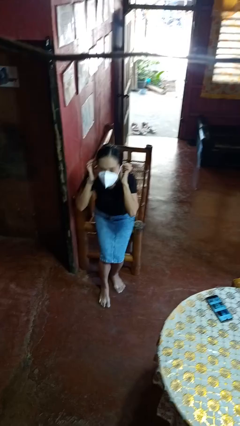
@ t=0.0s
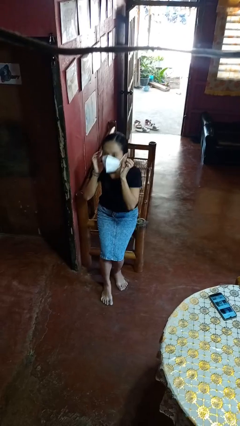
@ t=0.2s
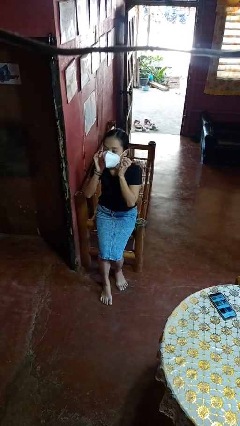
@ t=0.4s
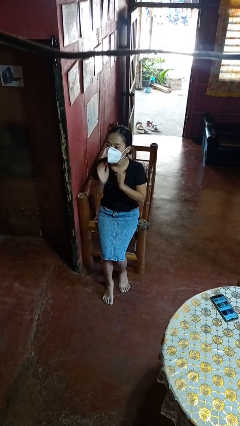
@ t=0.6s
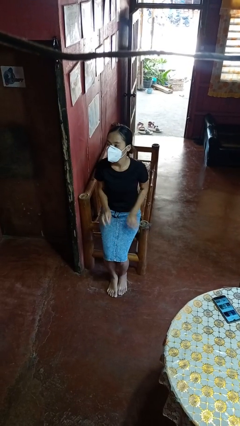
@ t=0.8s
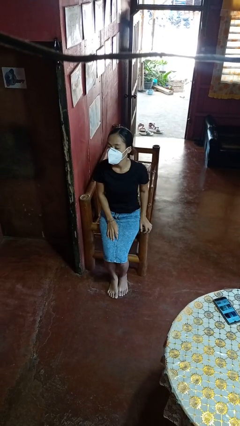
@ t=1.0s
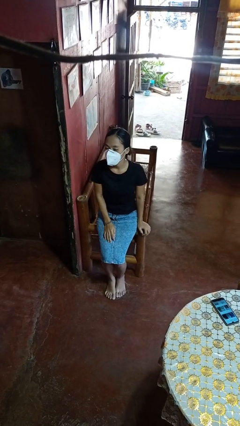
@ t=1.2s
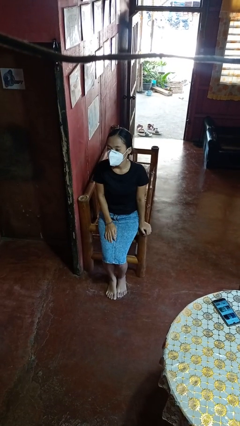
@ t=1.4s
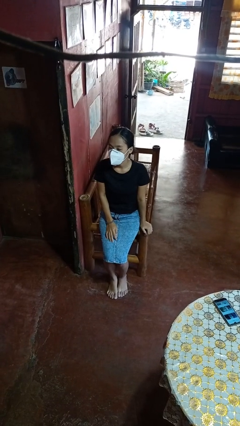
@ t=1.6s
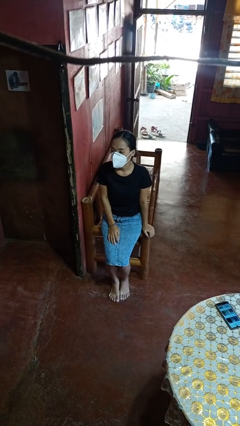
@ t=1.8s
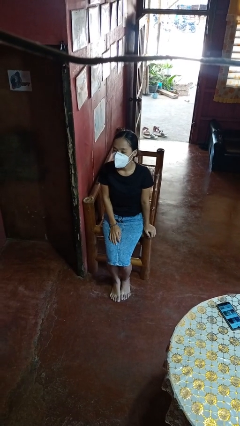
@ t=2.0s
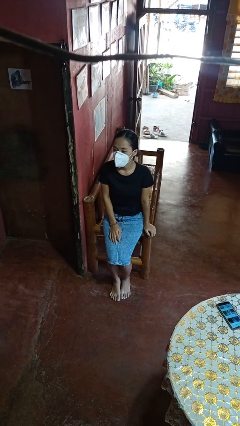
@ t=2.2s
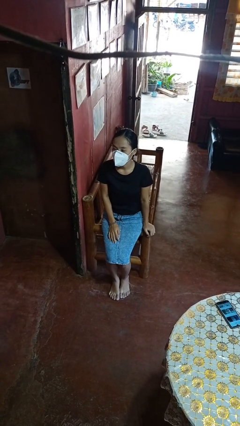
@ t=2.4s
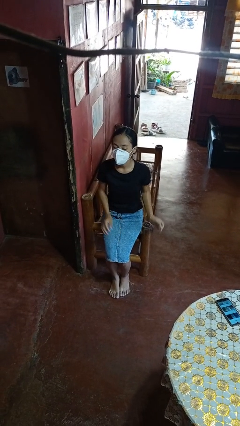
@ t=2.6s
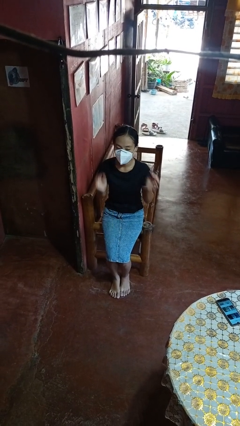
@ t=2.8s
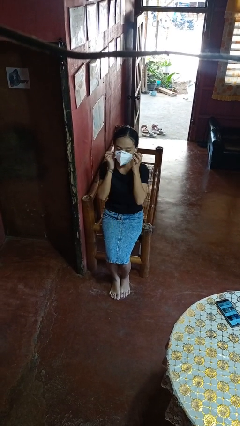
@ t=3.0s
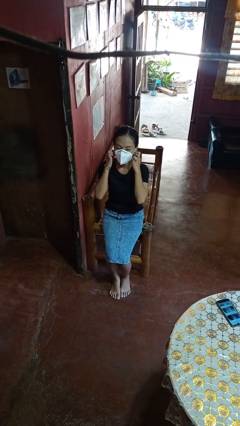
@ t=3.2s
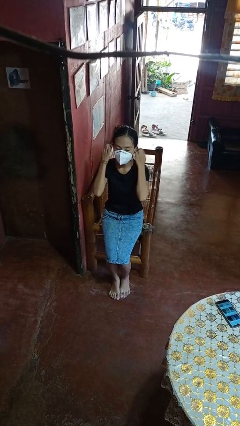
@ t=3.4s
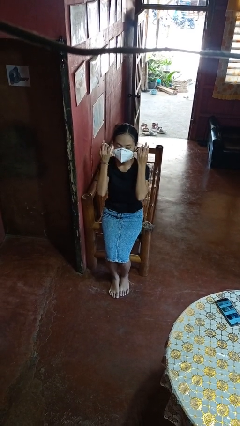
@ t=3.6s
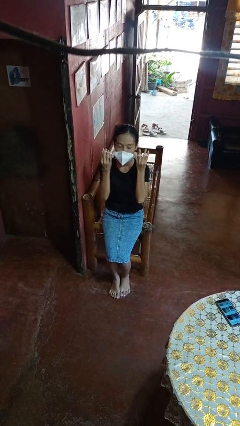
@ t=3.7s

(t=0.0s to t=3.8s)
person puts on facemask

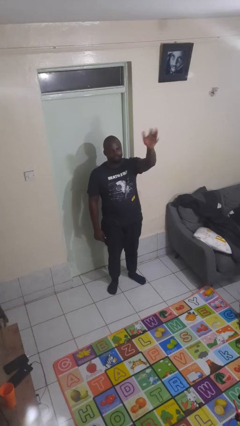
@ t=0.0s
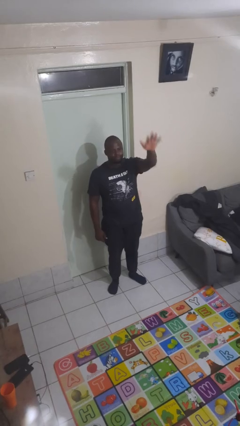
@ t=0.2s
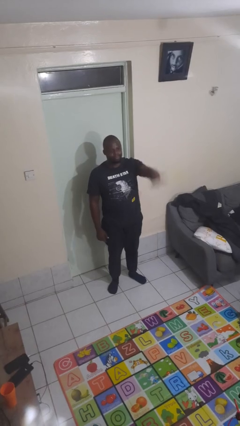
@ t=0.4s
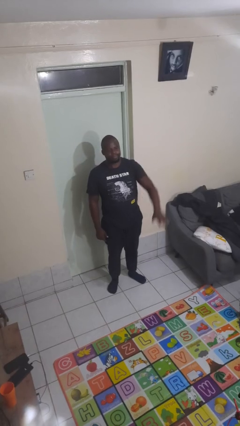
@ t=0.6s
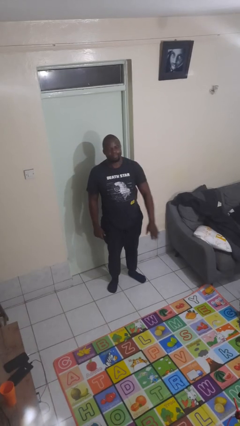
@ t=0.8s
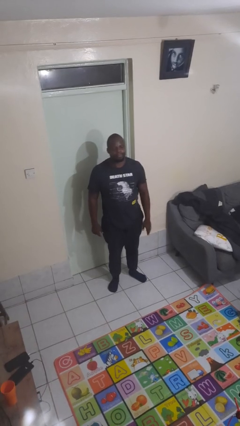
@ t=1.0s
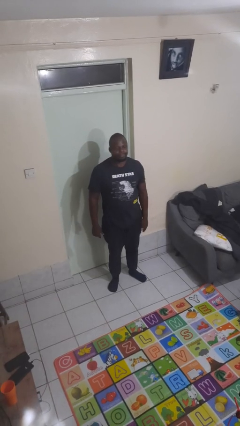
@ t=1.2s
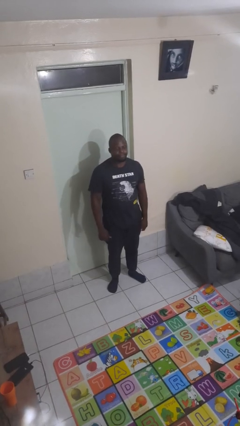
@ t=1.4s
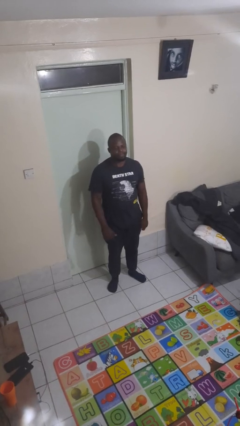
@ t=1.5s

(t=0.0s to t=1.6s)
person gestures swipe down

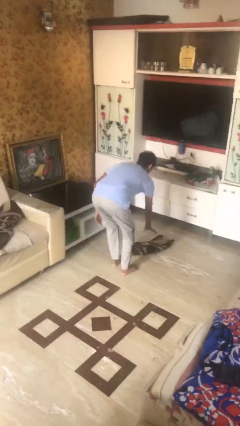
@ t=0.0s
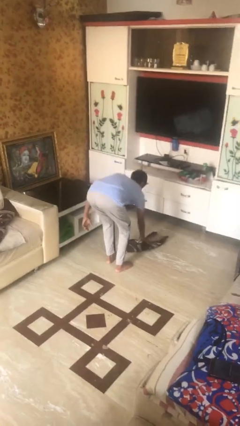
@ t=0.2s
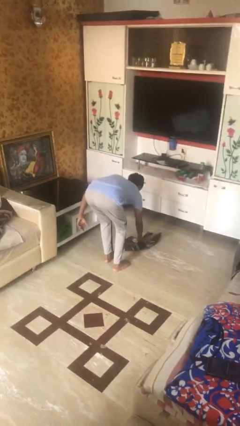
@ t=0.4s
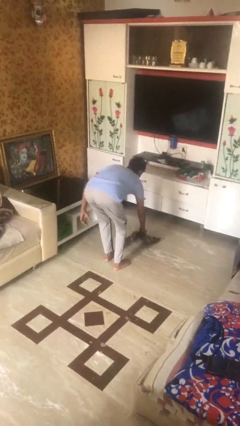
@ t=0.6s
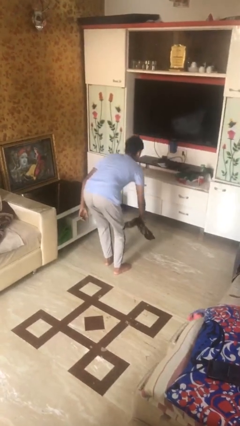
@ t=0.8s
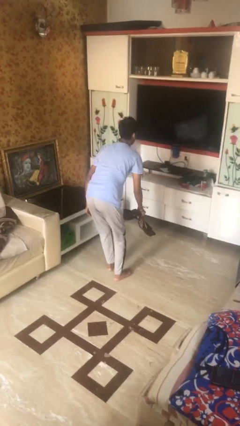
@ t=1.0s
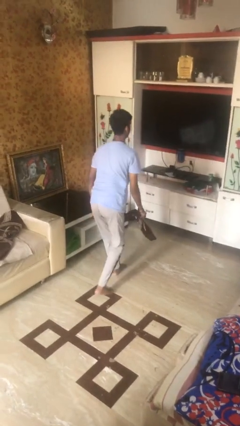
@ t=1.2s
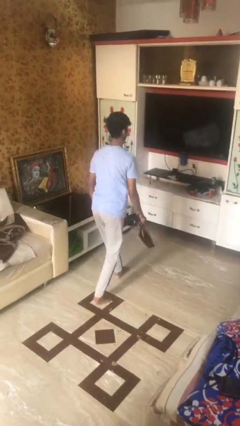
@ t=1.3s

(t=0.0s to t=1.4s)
person picks up object from floor

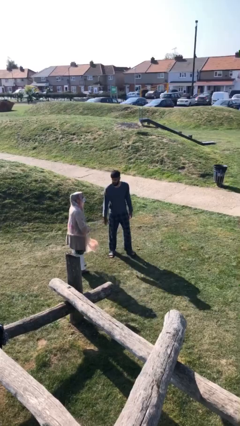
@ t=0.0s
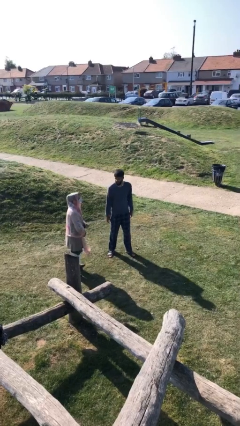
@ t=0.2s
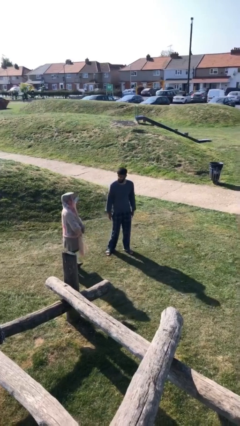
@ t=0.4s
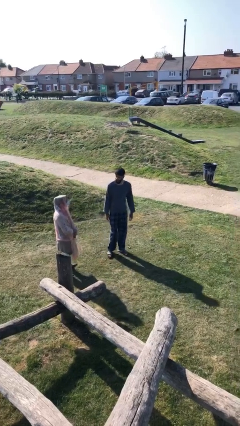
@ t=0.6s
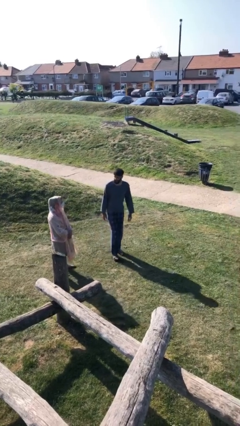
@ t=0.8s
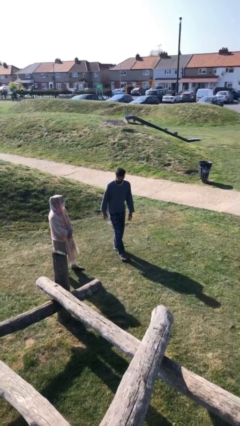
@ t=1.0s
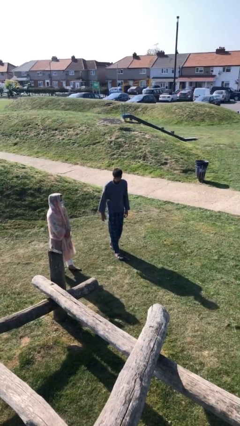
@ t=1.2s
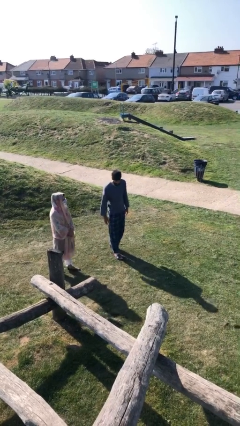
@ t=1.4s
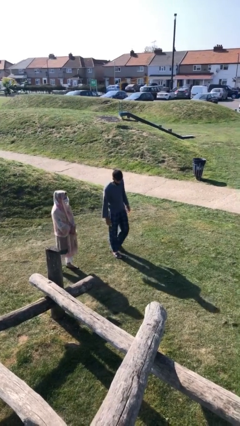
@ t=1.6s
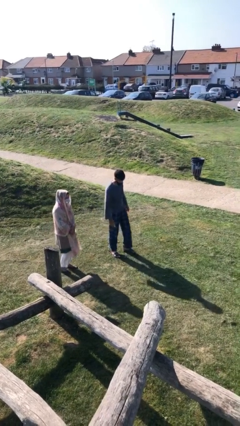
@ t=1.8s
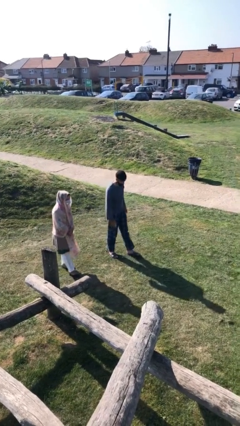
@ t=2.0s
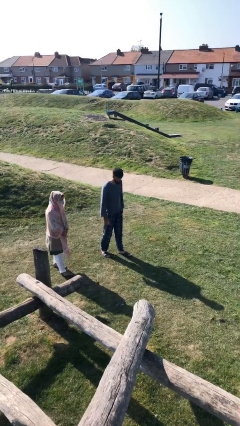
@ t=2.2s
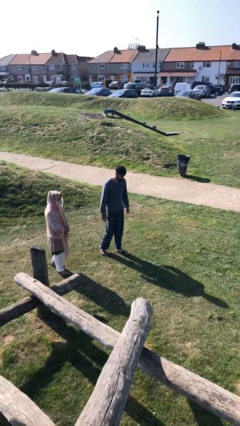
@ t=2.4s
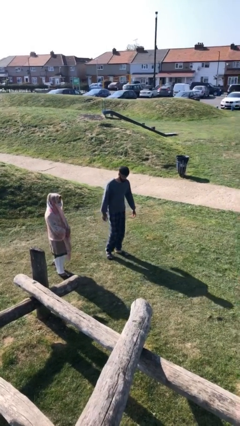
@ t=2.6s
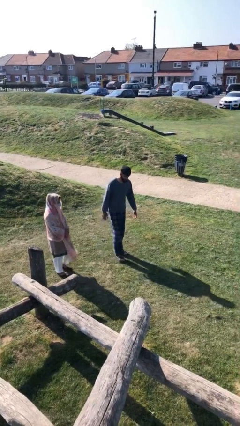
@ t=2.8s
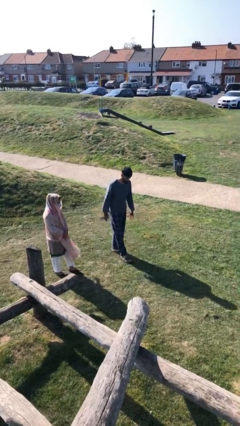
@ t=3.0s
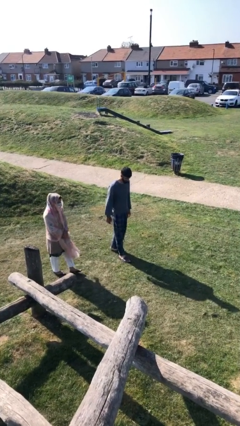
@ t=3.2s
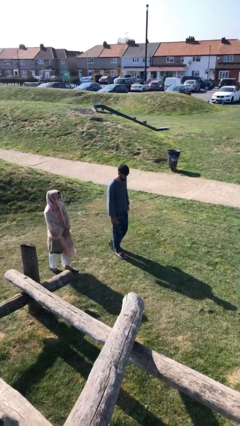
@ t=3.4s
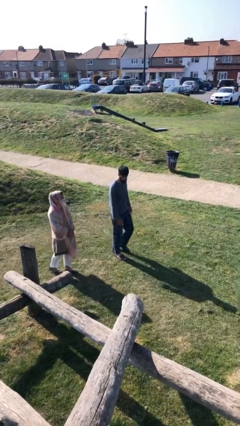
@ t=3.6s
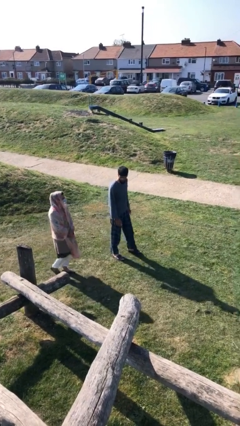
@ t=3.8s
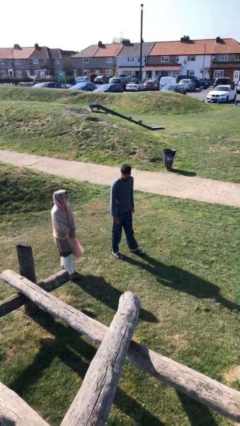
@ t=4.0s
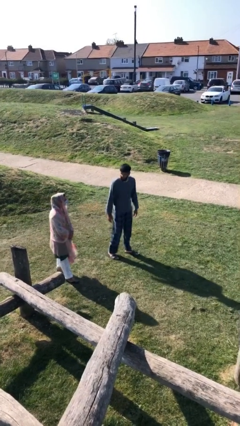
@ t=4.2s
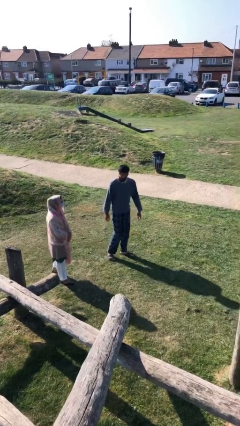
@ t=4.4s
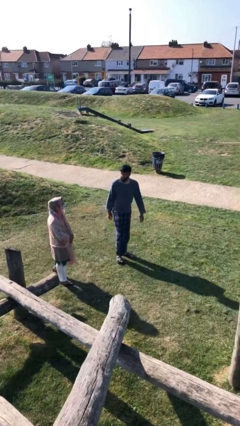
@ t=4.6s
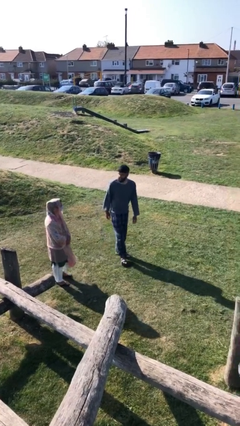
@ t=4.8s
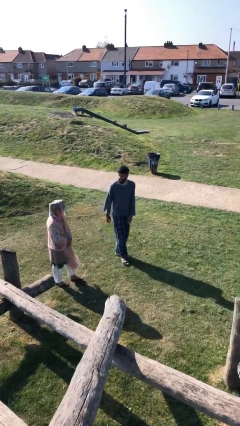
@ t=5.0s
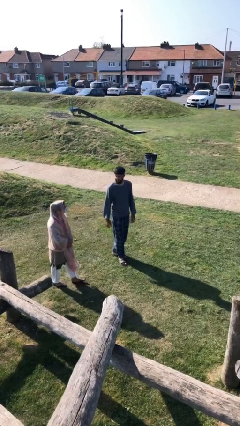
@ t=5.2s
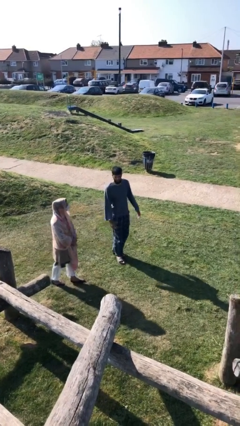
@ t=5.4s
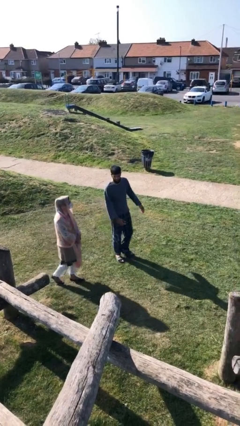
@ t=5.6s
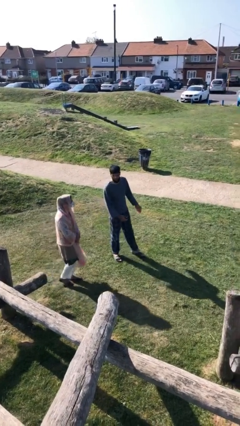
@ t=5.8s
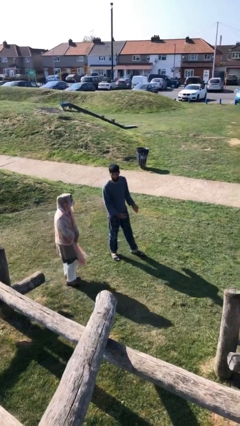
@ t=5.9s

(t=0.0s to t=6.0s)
person talks to person

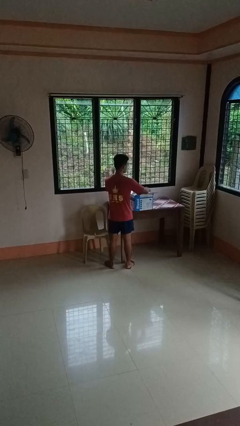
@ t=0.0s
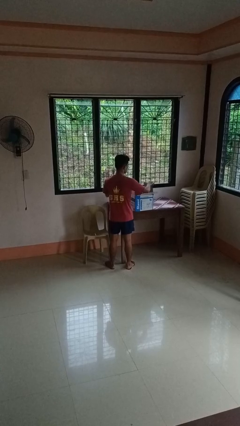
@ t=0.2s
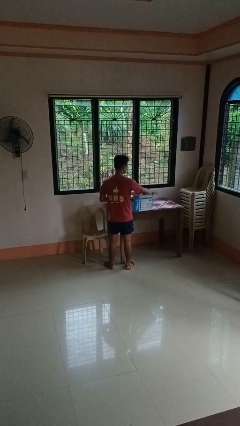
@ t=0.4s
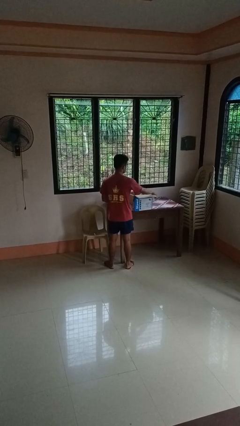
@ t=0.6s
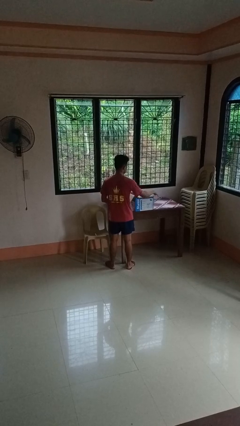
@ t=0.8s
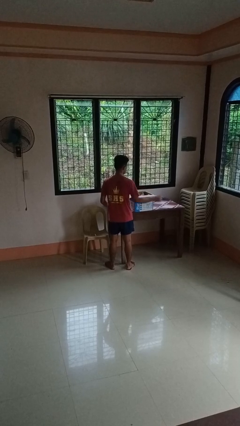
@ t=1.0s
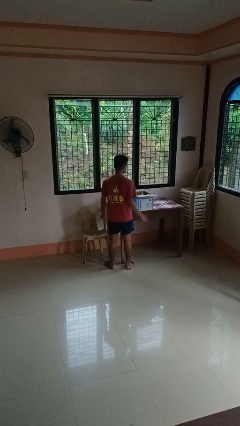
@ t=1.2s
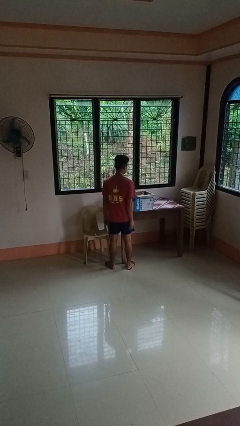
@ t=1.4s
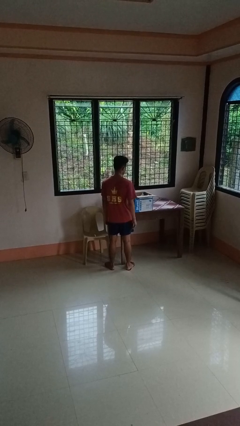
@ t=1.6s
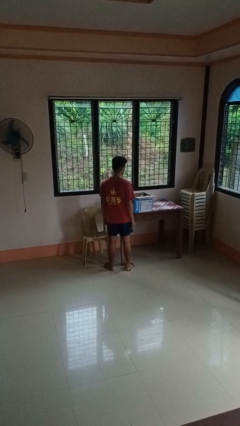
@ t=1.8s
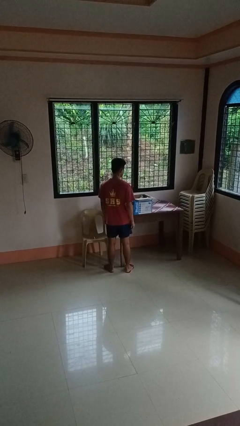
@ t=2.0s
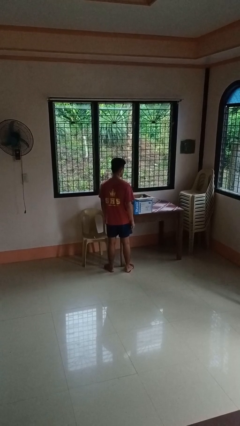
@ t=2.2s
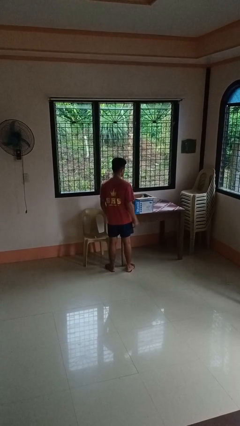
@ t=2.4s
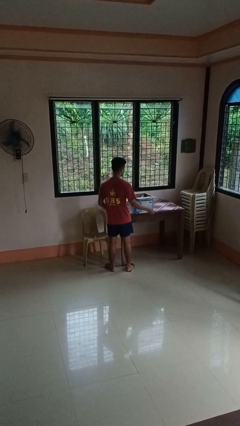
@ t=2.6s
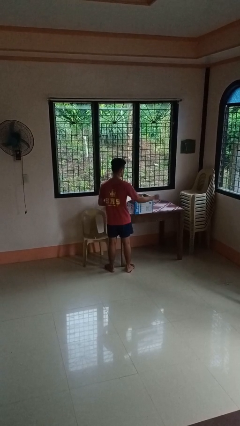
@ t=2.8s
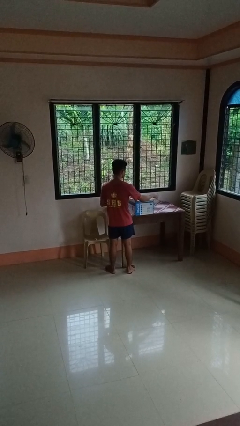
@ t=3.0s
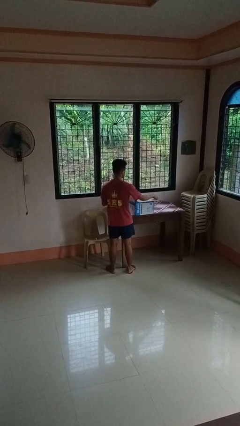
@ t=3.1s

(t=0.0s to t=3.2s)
person opens box

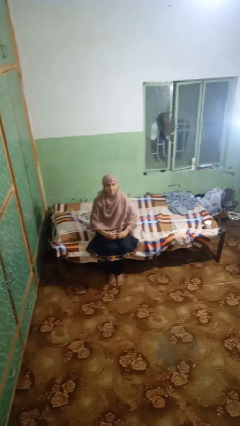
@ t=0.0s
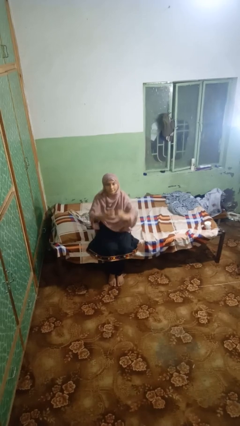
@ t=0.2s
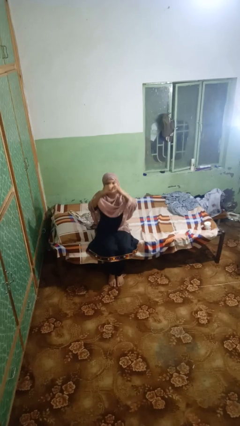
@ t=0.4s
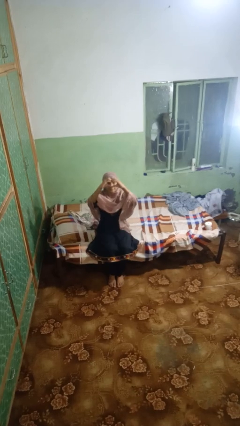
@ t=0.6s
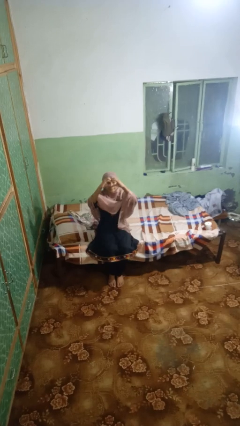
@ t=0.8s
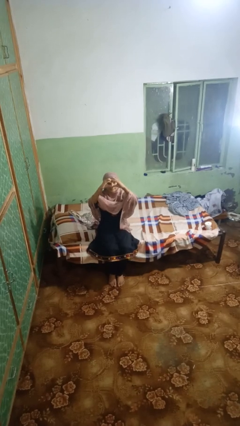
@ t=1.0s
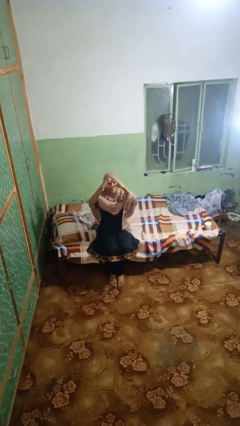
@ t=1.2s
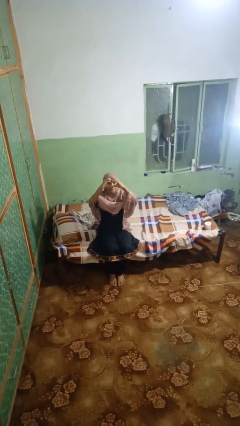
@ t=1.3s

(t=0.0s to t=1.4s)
person gestures heart
